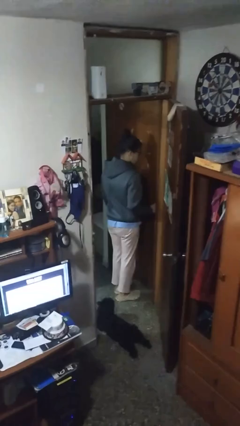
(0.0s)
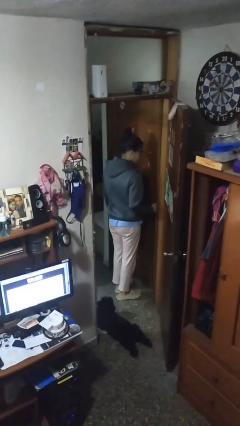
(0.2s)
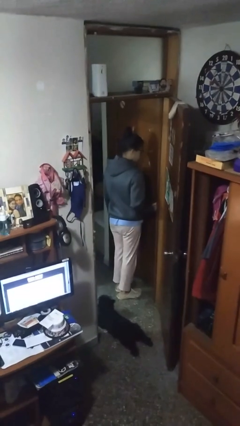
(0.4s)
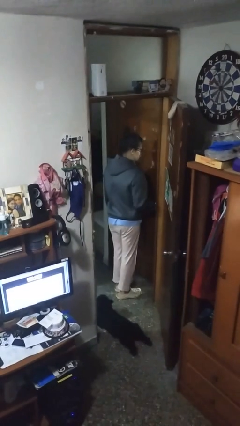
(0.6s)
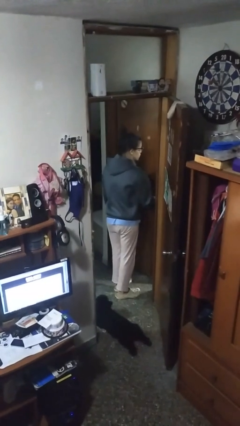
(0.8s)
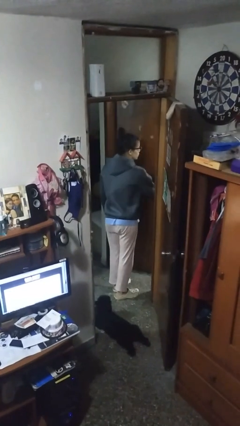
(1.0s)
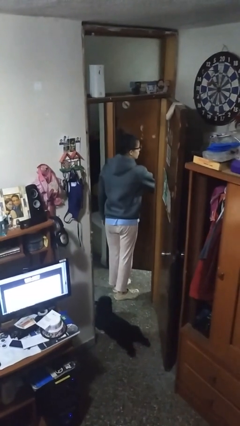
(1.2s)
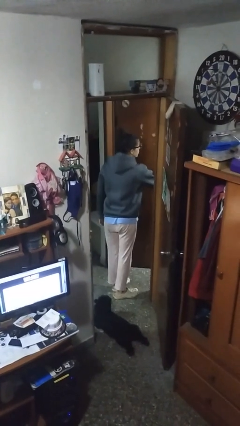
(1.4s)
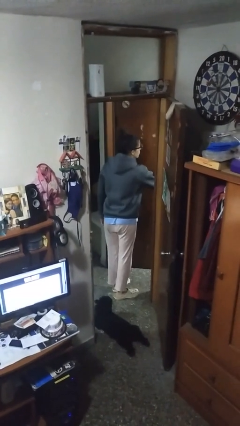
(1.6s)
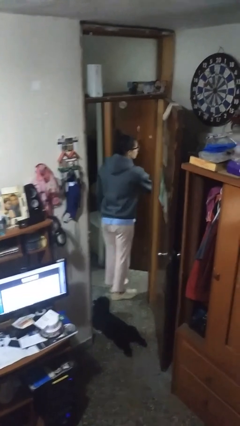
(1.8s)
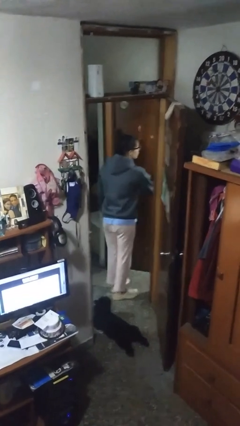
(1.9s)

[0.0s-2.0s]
person opens facility door

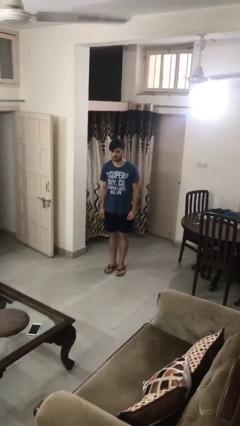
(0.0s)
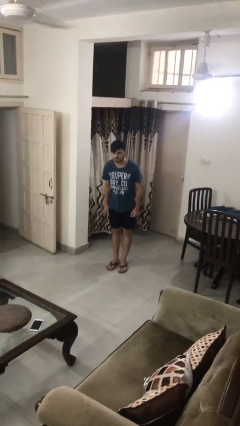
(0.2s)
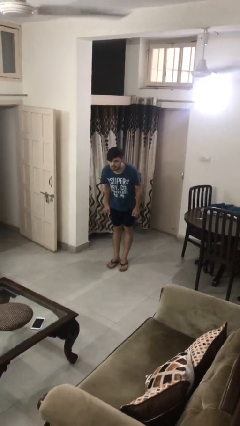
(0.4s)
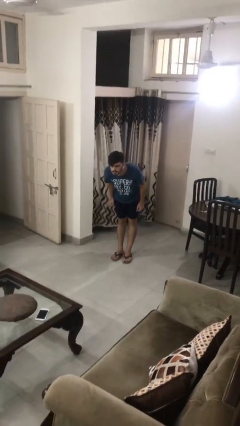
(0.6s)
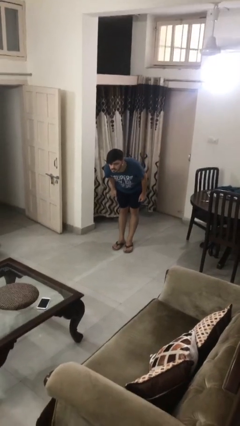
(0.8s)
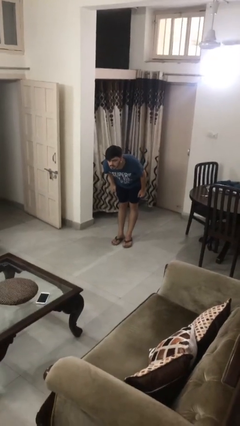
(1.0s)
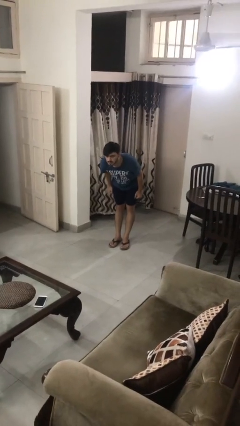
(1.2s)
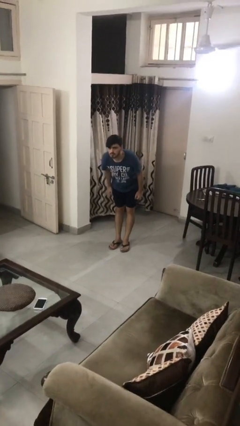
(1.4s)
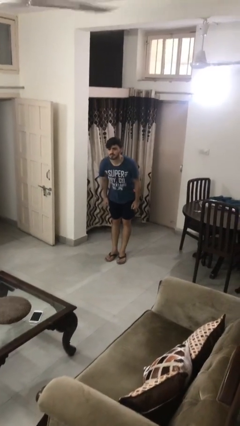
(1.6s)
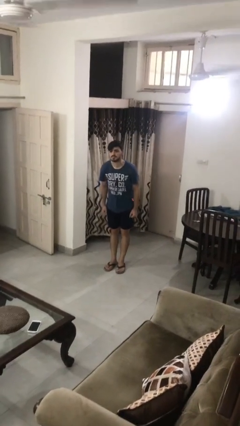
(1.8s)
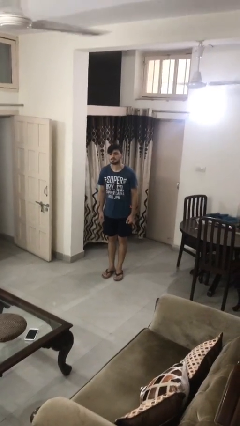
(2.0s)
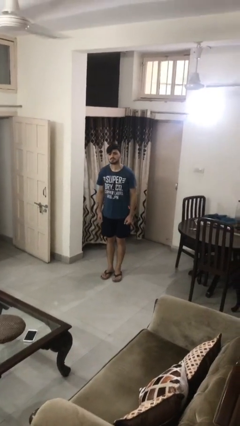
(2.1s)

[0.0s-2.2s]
person bows

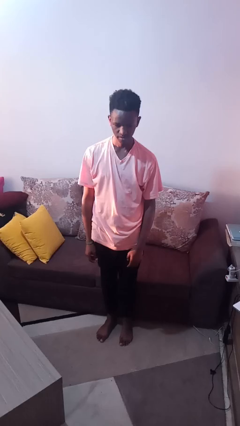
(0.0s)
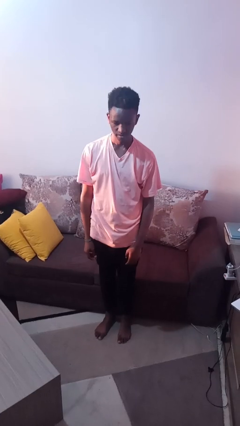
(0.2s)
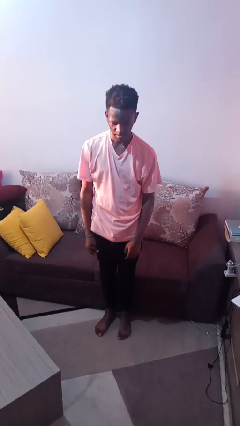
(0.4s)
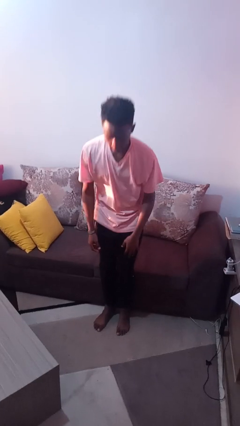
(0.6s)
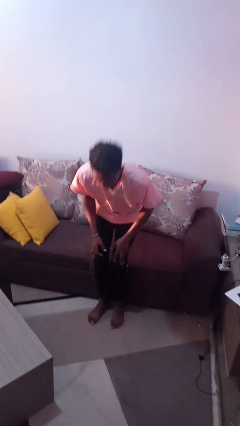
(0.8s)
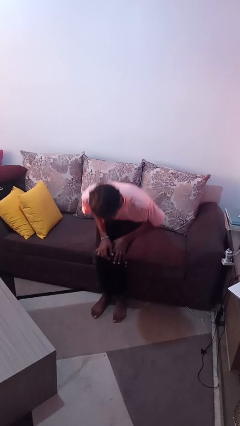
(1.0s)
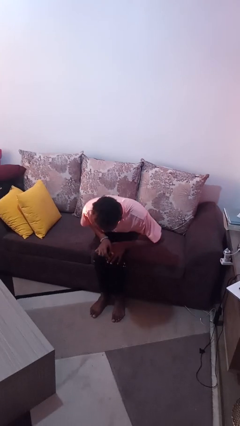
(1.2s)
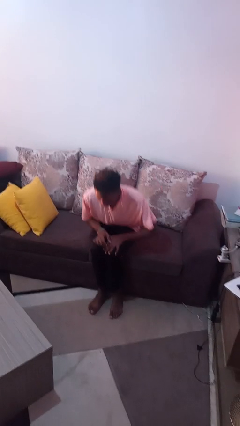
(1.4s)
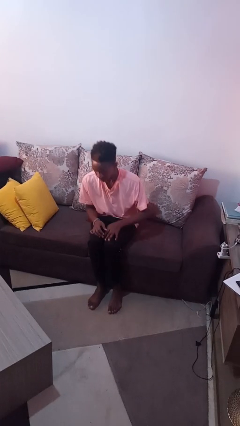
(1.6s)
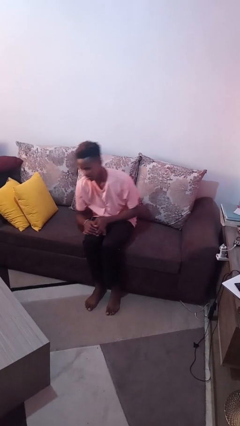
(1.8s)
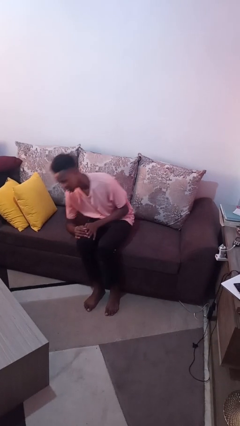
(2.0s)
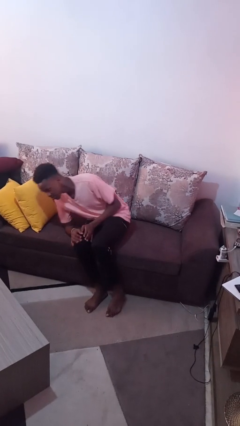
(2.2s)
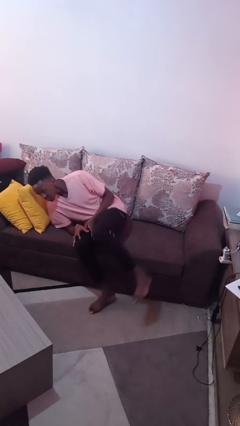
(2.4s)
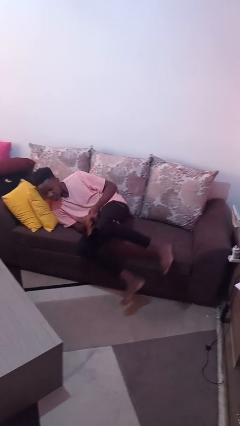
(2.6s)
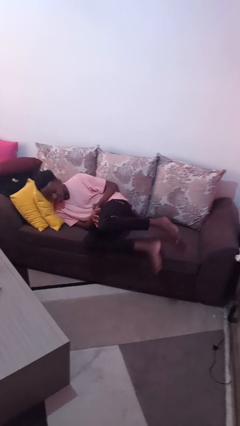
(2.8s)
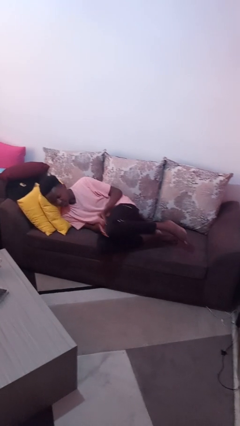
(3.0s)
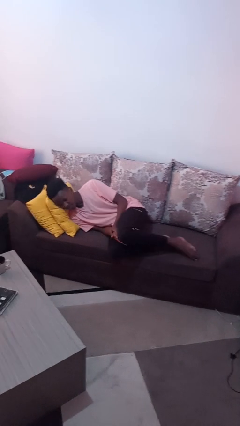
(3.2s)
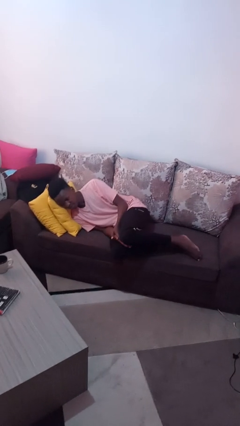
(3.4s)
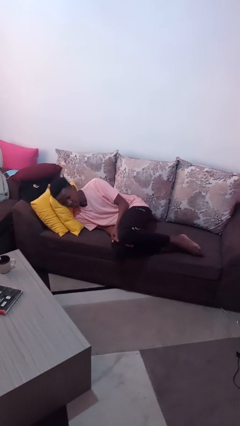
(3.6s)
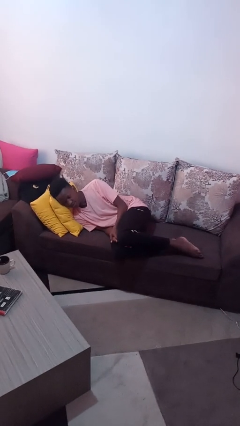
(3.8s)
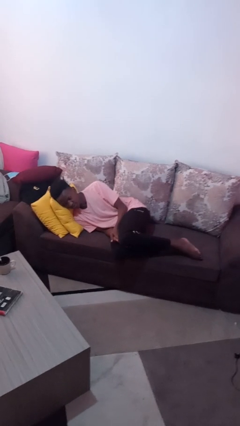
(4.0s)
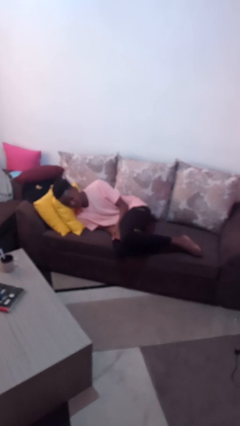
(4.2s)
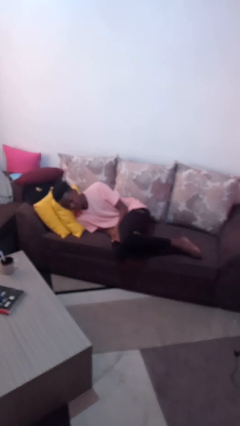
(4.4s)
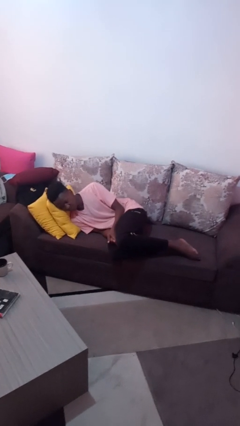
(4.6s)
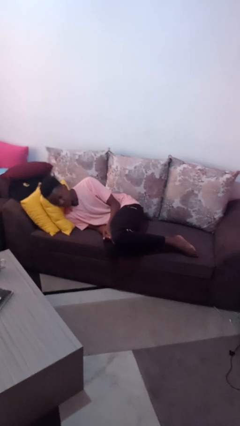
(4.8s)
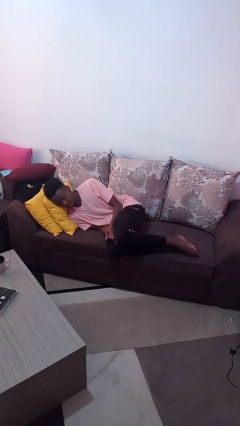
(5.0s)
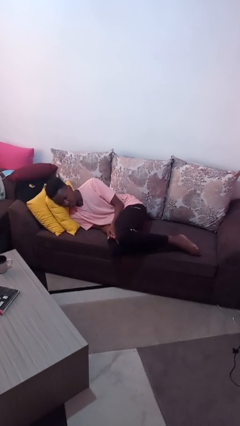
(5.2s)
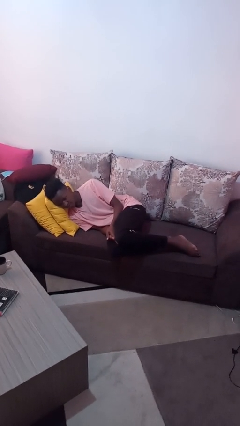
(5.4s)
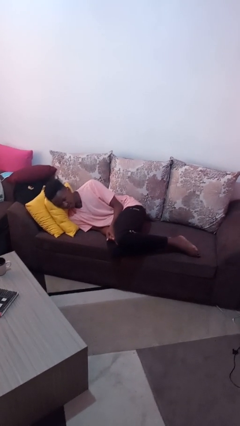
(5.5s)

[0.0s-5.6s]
person lies down on couch

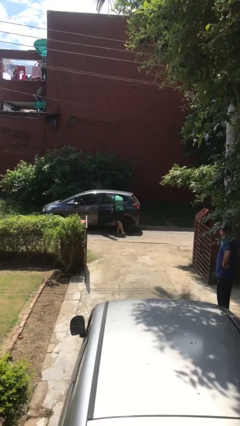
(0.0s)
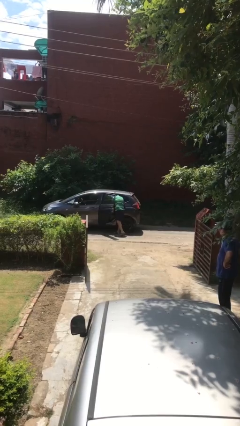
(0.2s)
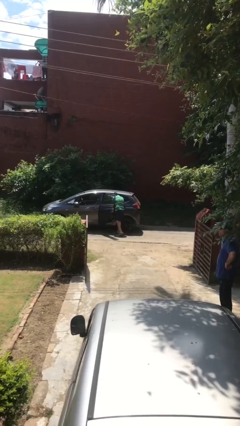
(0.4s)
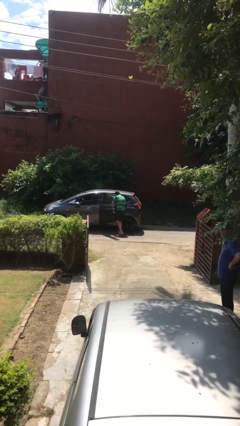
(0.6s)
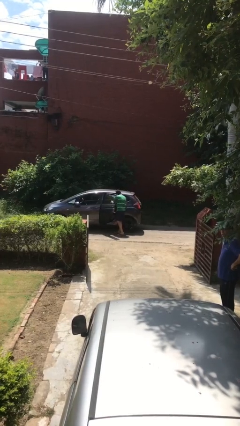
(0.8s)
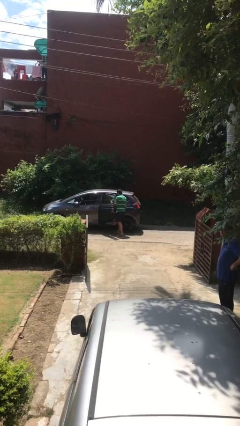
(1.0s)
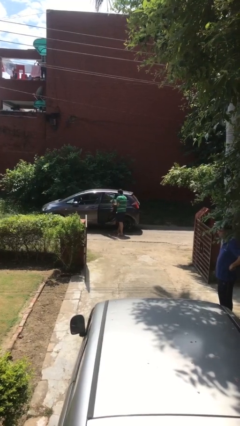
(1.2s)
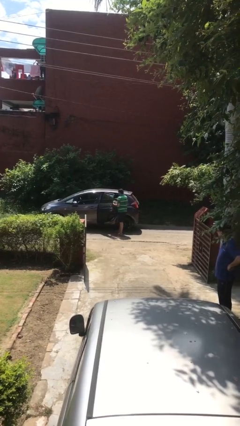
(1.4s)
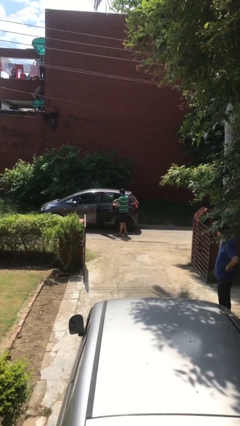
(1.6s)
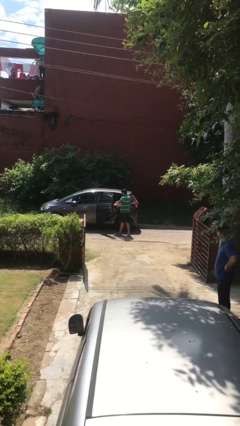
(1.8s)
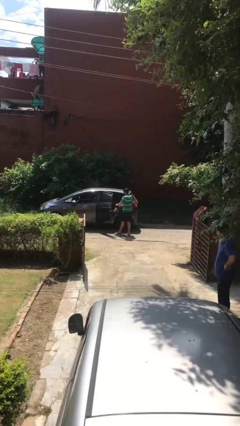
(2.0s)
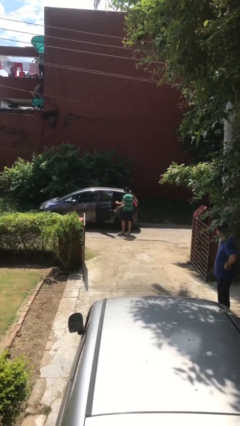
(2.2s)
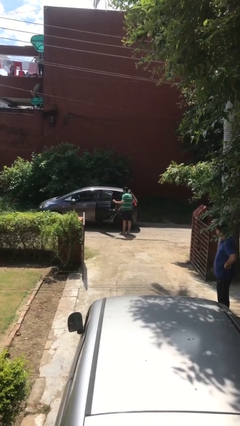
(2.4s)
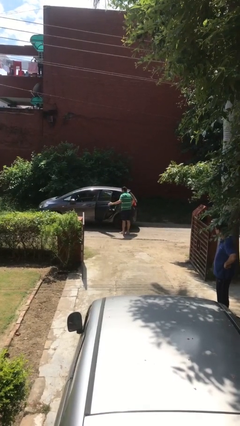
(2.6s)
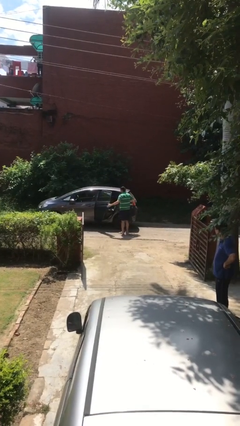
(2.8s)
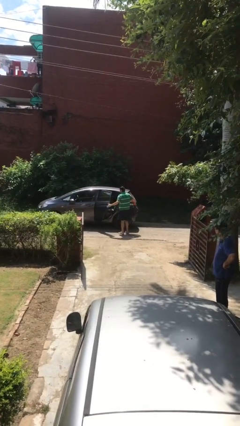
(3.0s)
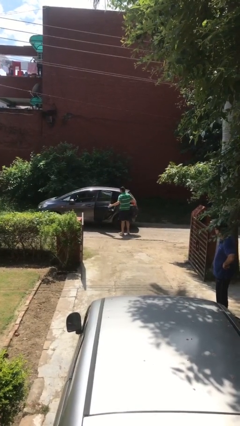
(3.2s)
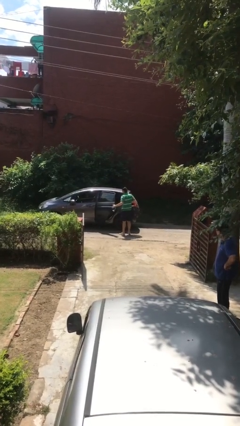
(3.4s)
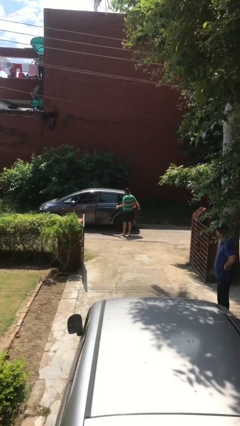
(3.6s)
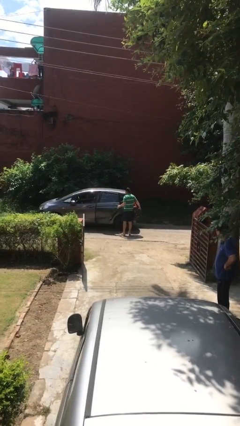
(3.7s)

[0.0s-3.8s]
person unloads car

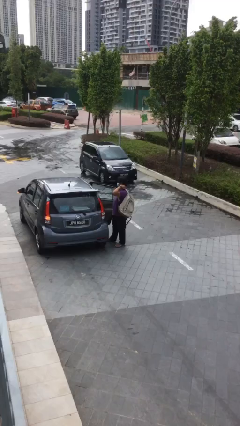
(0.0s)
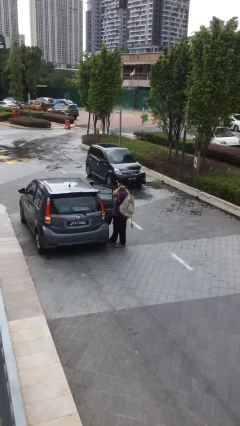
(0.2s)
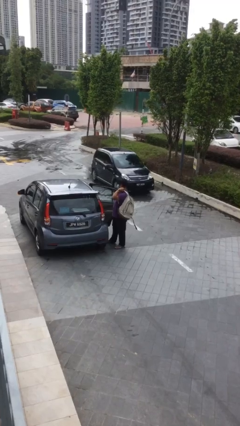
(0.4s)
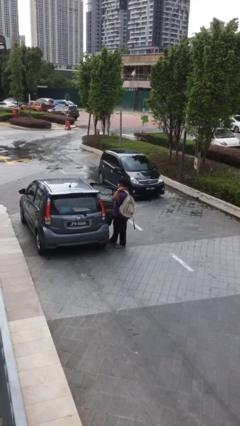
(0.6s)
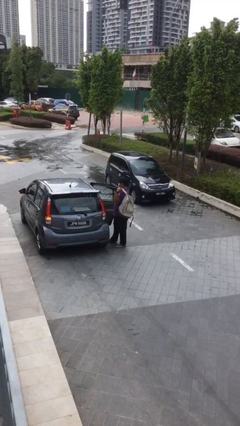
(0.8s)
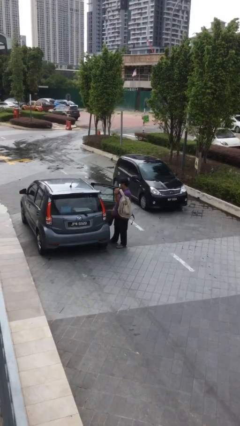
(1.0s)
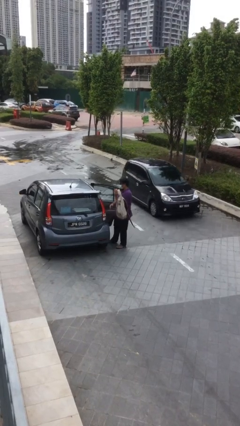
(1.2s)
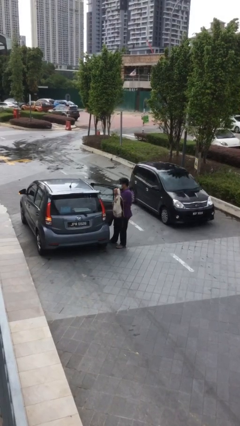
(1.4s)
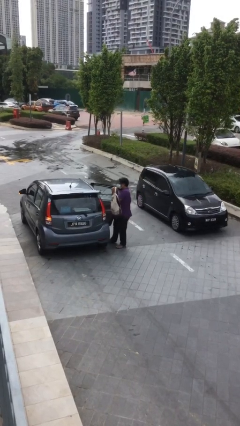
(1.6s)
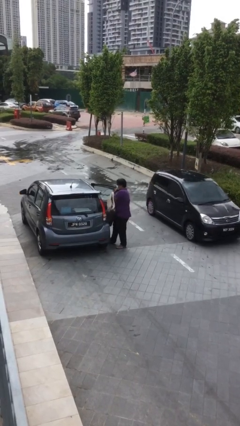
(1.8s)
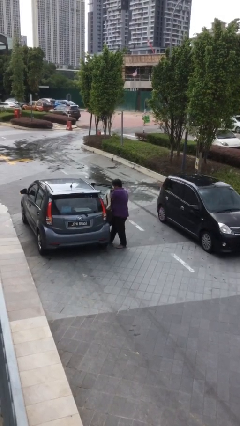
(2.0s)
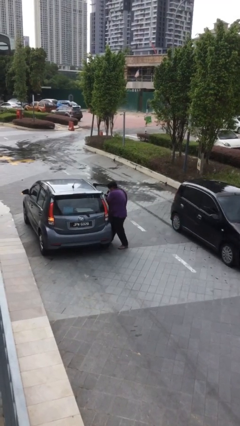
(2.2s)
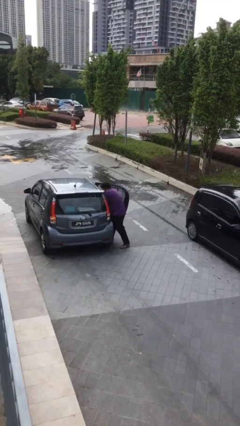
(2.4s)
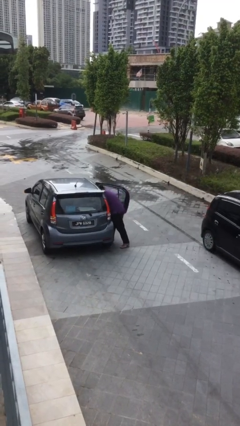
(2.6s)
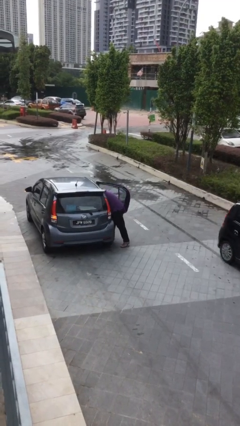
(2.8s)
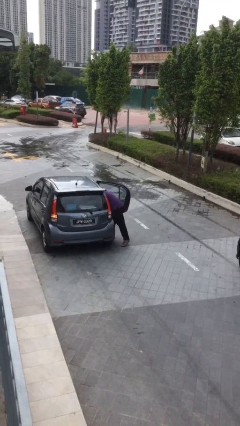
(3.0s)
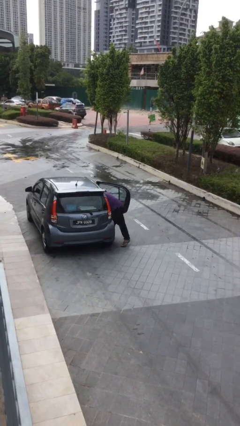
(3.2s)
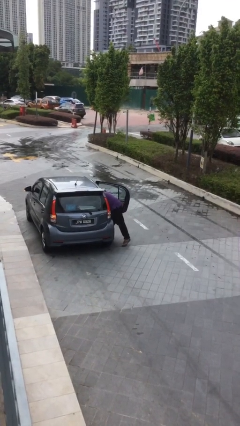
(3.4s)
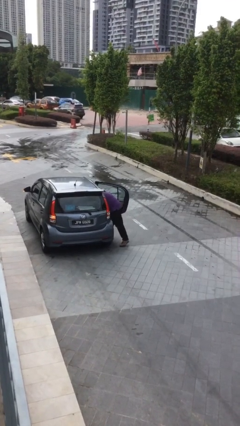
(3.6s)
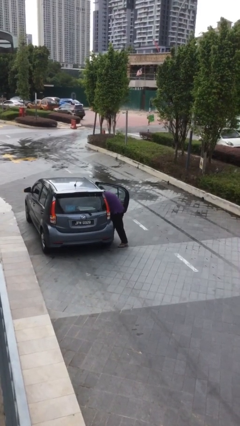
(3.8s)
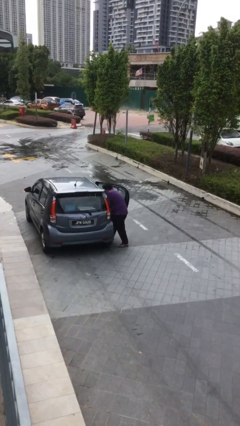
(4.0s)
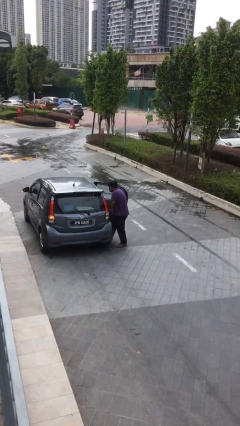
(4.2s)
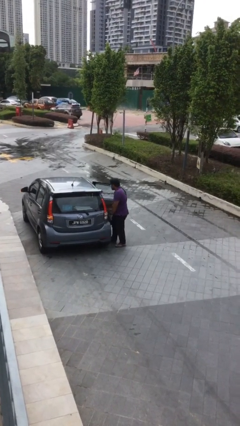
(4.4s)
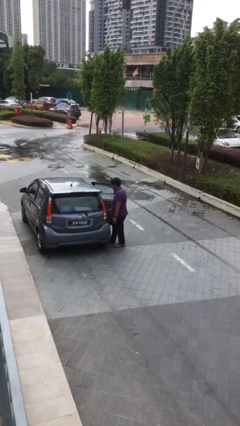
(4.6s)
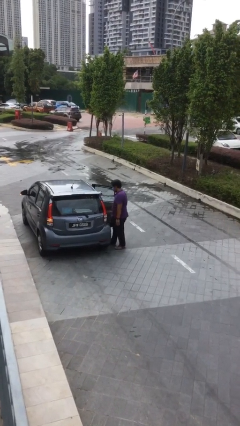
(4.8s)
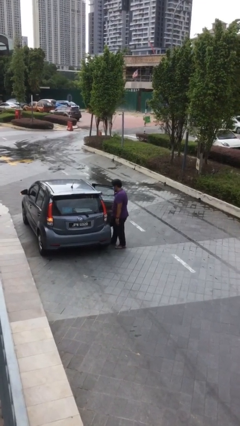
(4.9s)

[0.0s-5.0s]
person loads car
